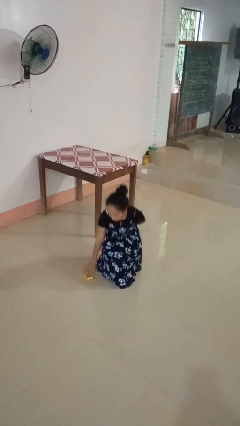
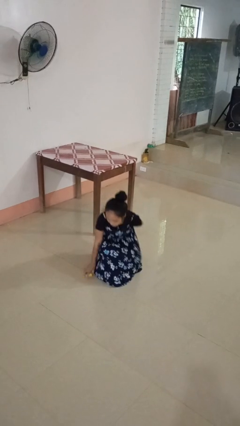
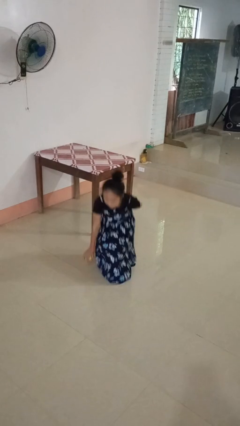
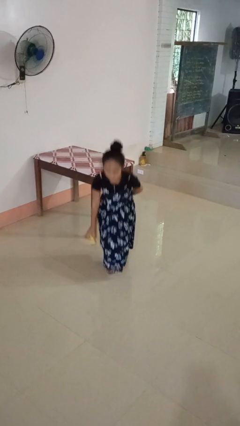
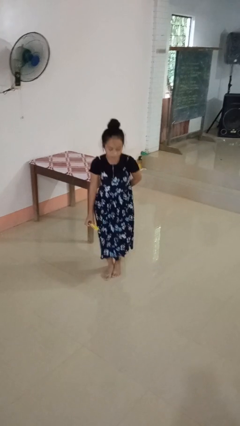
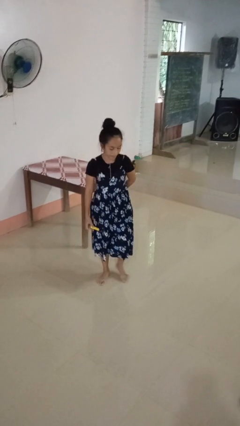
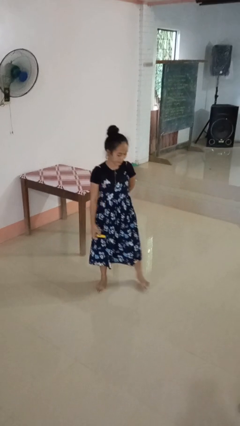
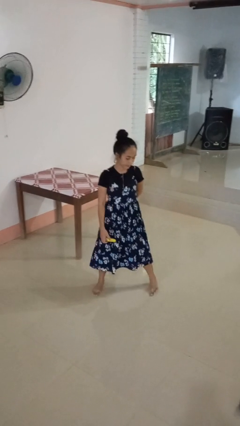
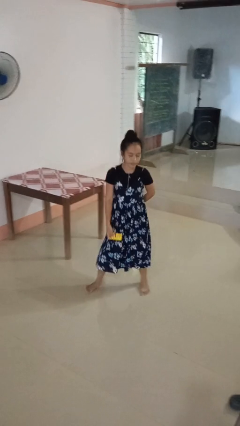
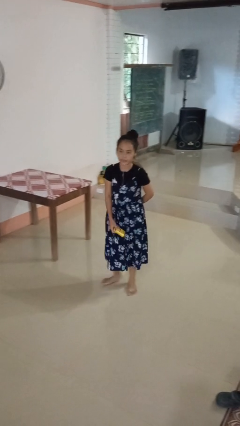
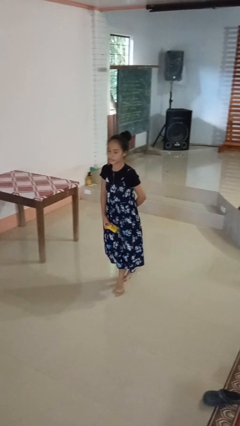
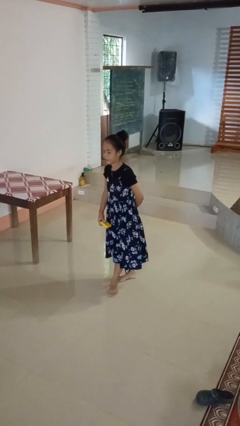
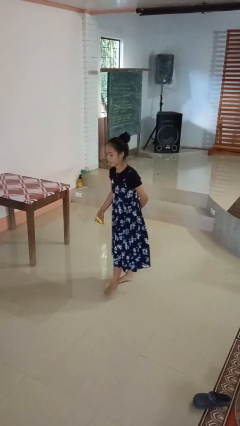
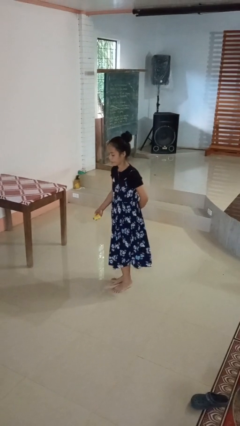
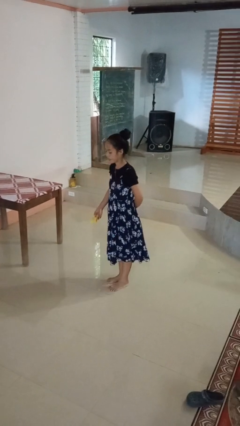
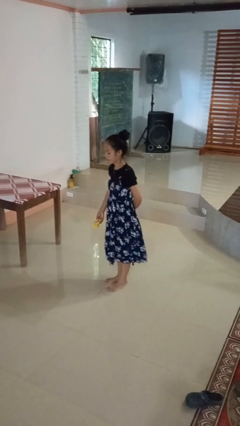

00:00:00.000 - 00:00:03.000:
person picks up object from floor

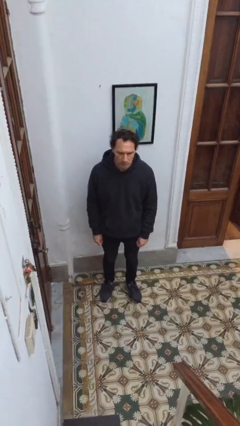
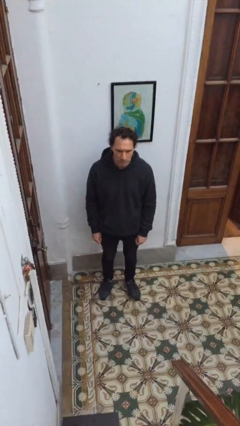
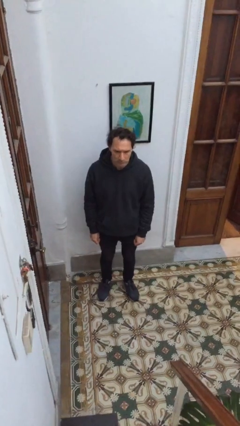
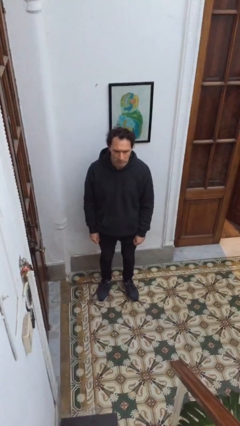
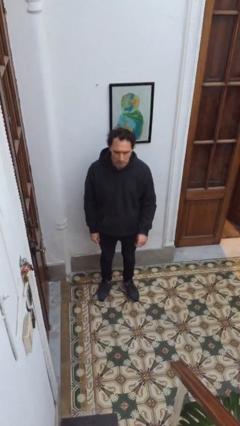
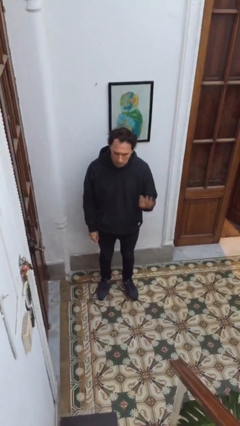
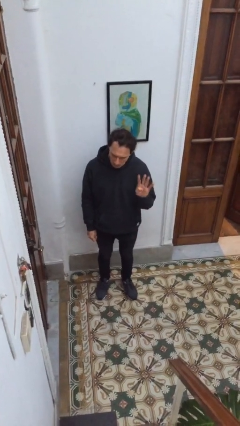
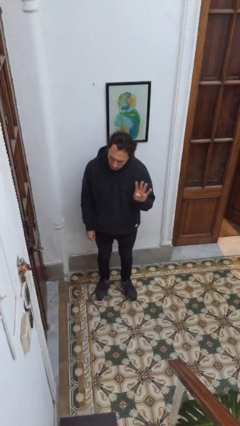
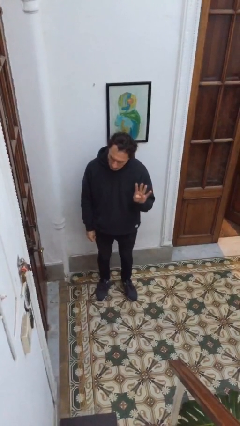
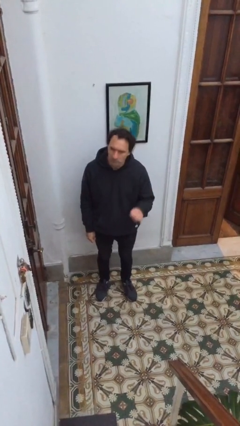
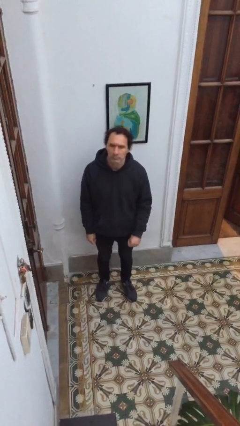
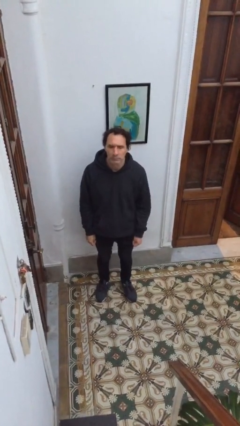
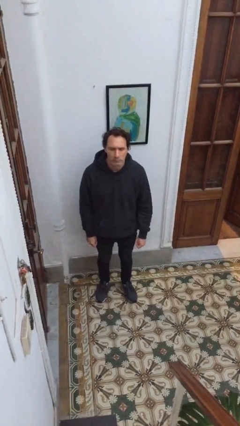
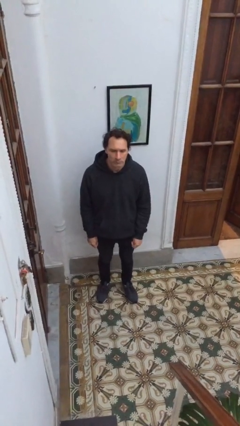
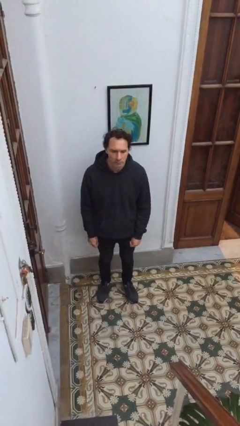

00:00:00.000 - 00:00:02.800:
person gestures number four

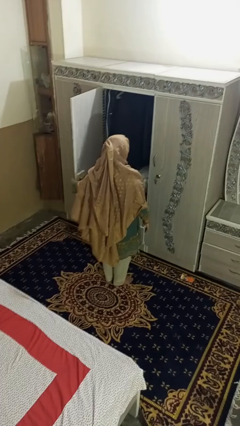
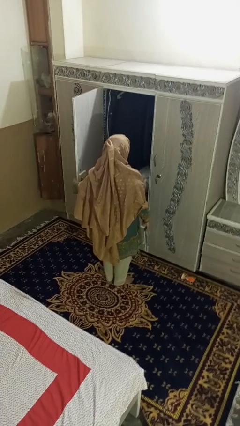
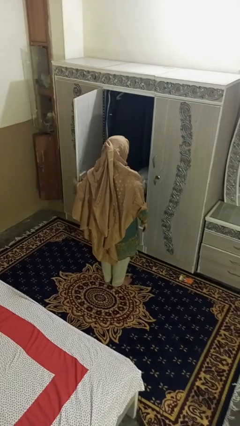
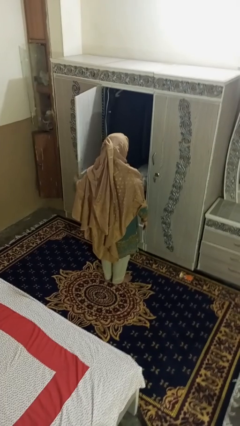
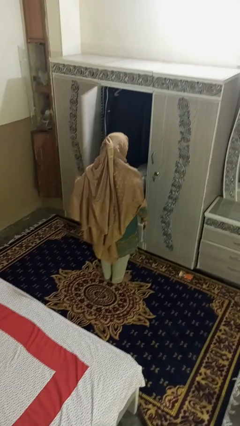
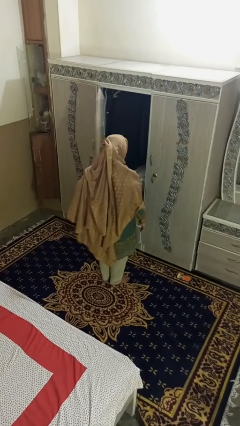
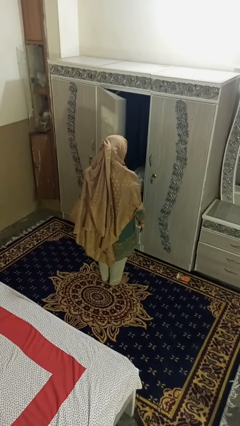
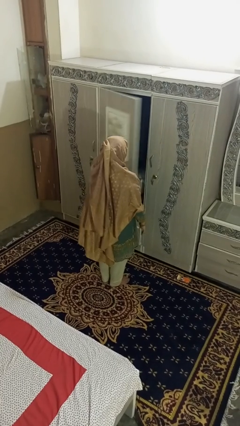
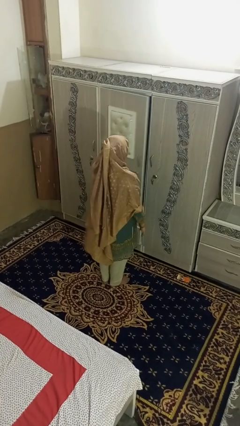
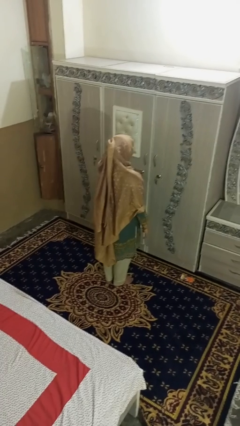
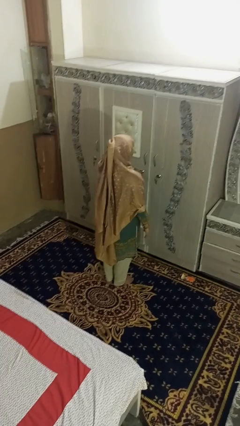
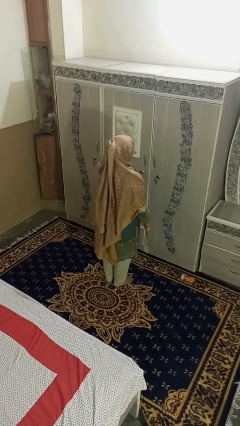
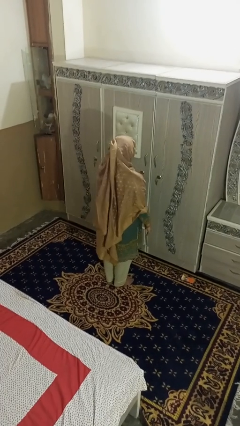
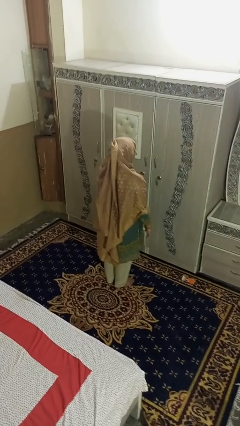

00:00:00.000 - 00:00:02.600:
person closes dresser drawer

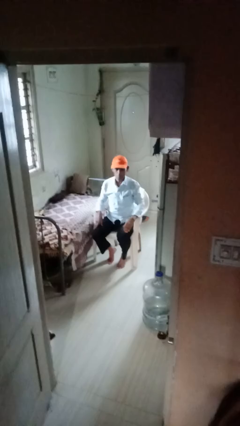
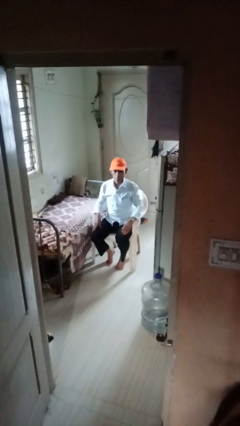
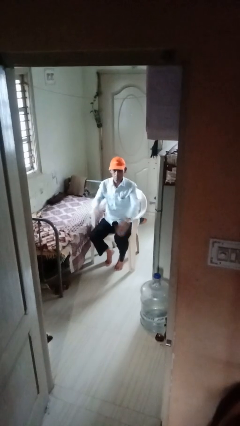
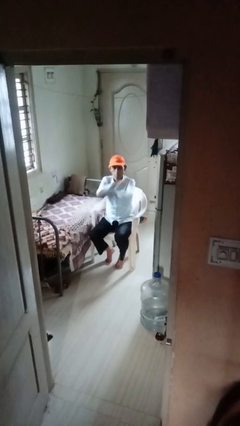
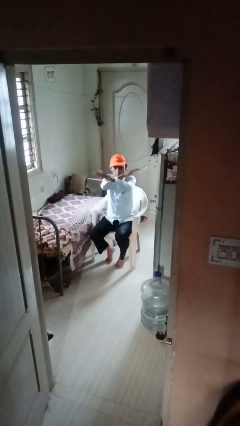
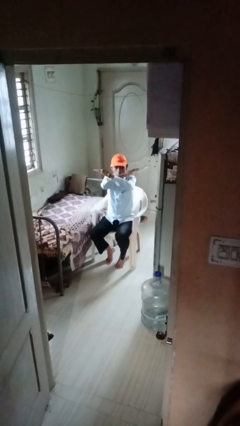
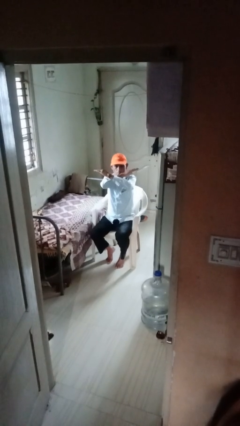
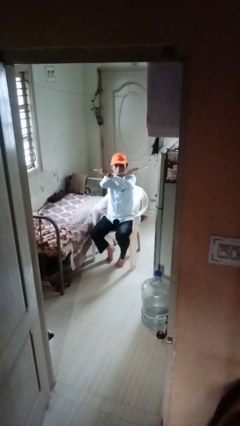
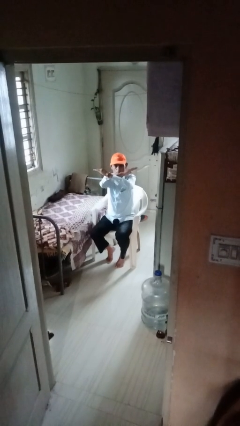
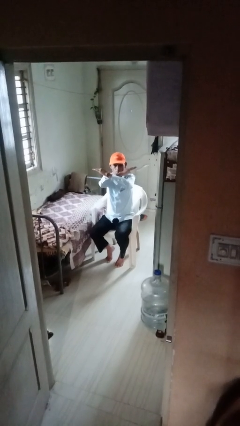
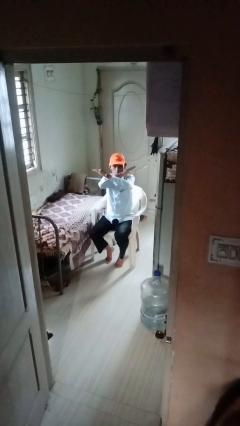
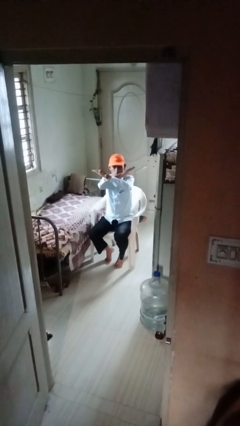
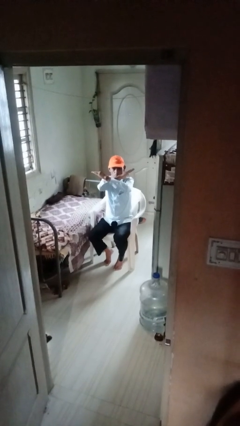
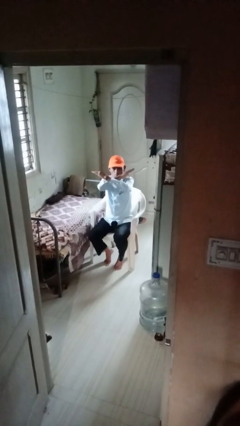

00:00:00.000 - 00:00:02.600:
person gestures arms x

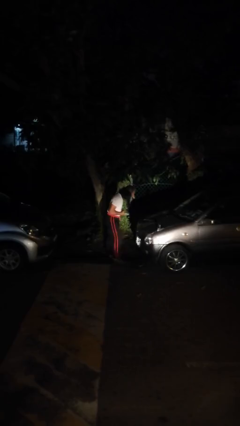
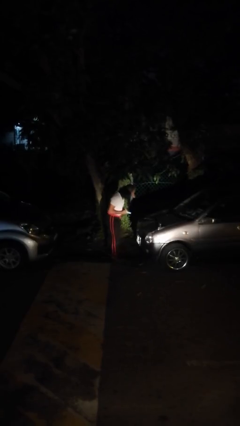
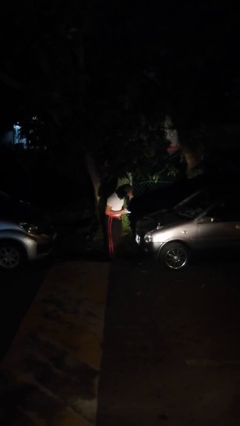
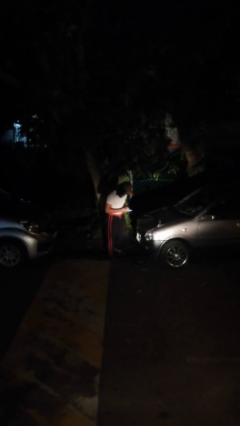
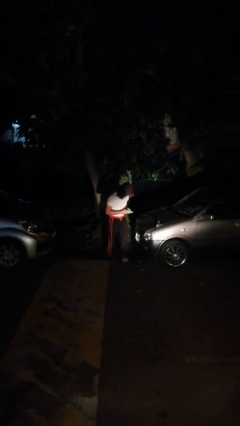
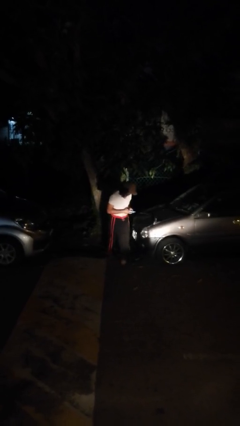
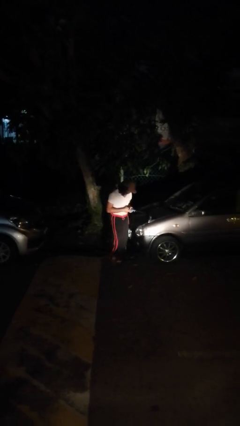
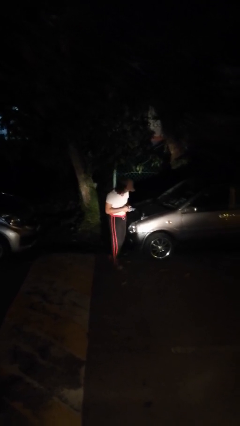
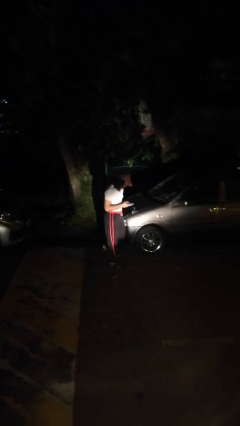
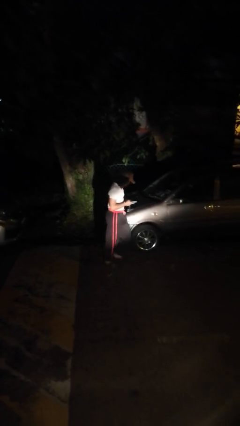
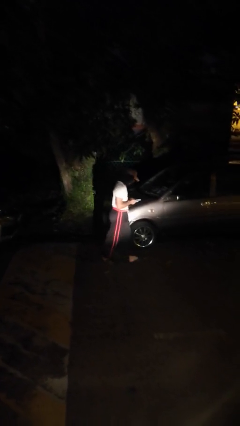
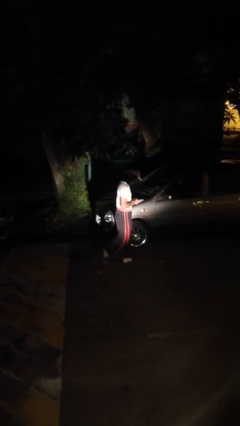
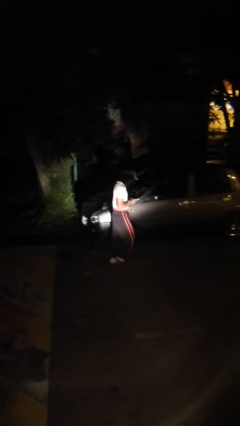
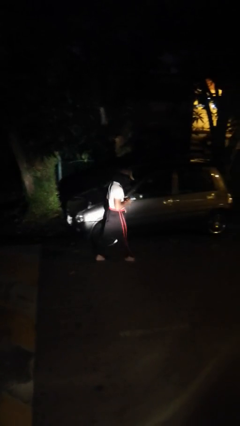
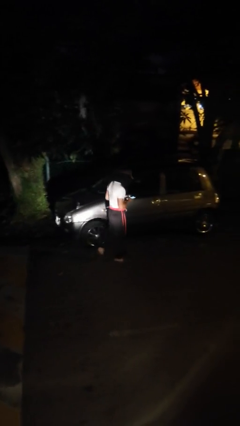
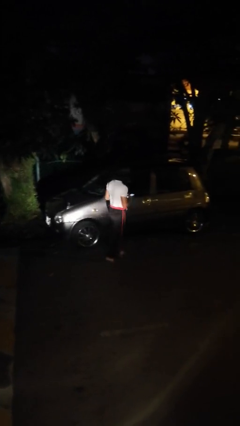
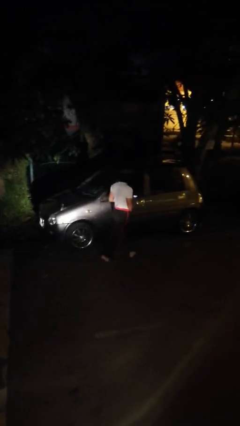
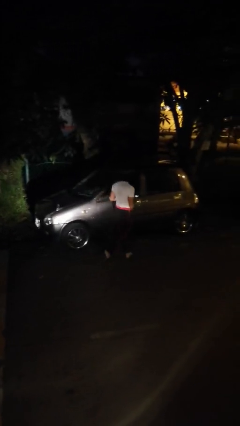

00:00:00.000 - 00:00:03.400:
person walks around car

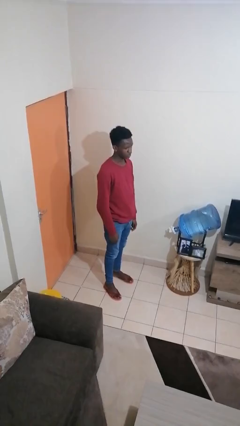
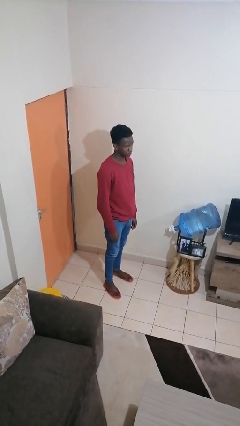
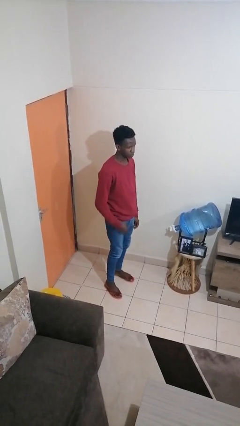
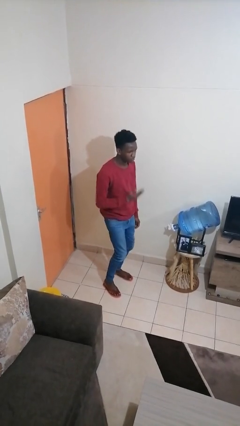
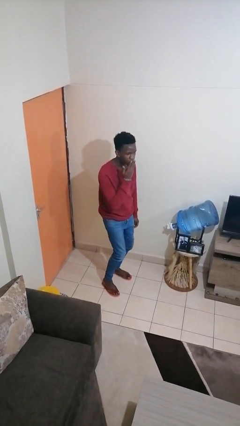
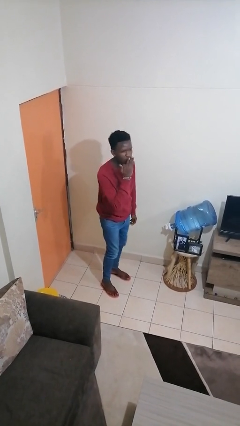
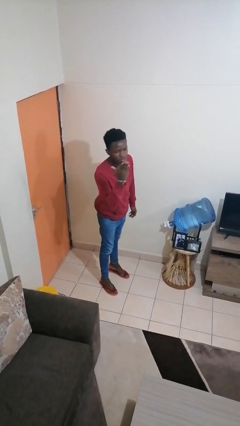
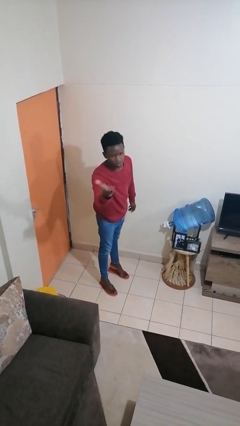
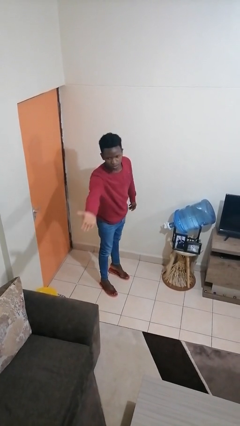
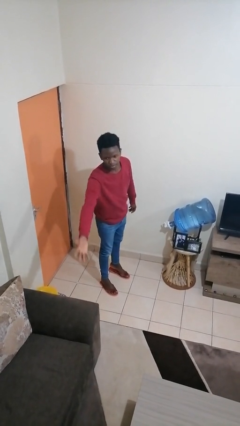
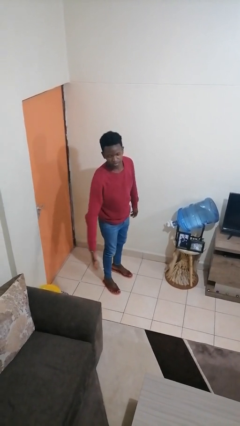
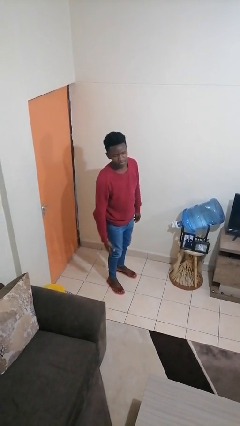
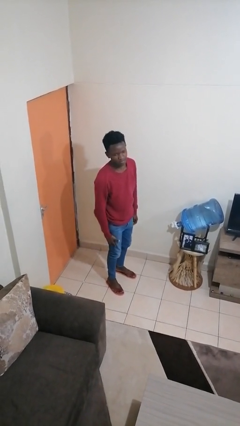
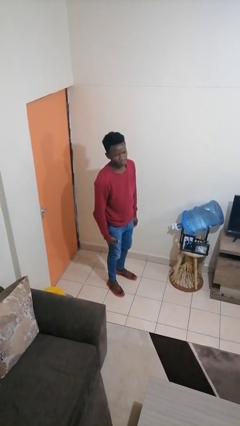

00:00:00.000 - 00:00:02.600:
person gestures blow kiss
